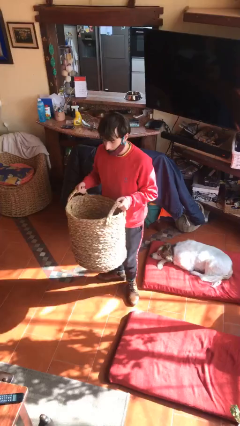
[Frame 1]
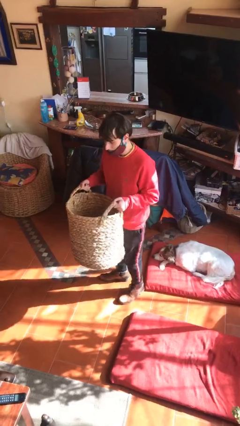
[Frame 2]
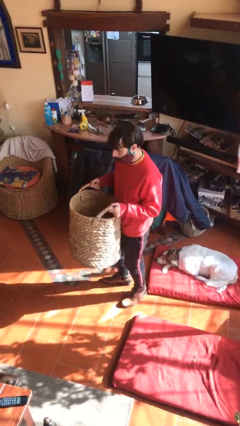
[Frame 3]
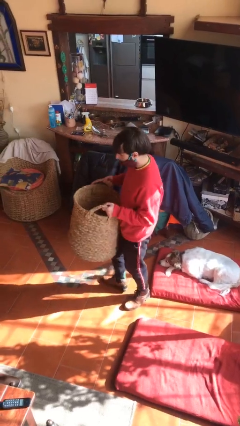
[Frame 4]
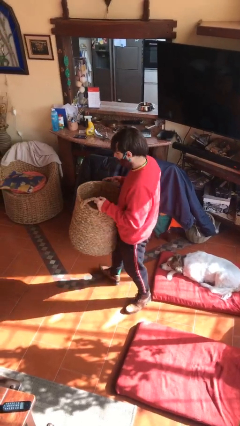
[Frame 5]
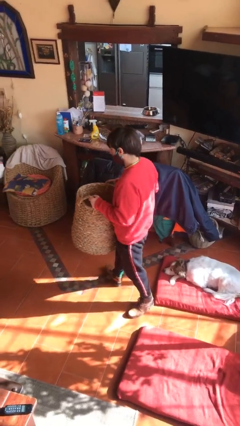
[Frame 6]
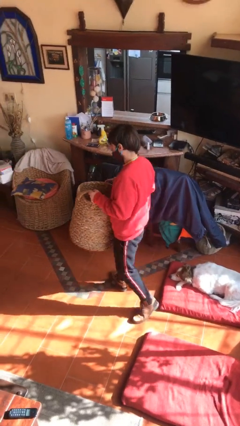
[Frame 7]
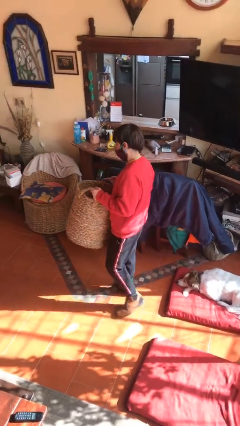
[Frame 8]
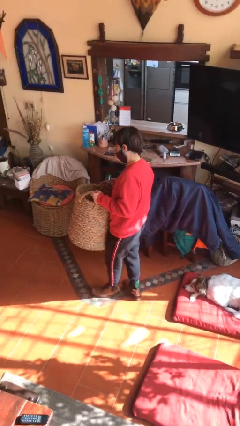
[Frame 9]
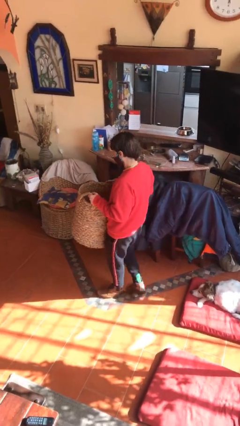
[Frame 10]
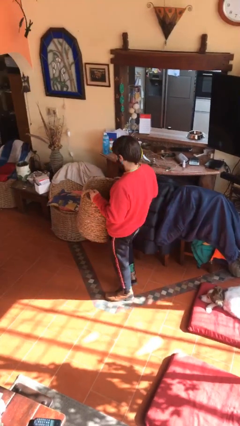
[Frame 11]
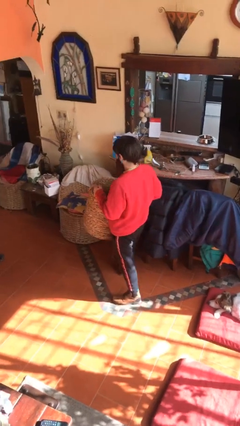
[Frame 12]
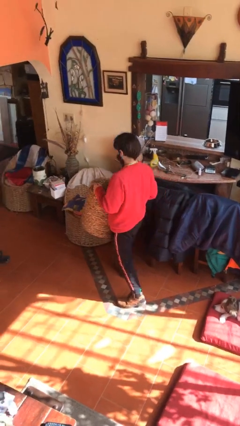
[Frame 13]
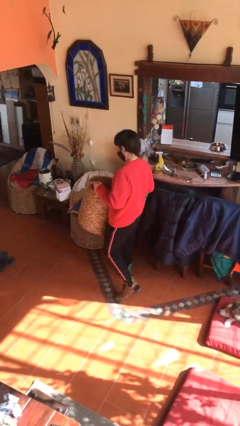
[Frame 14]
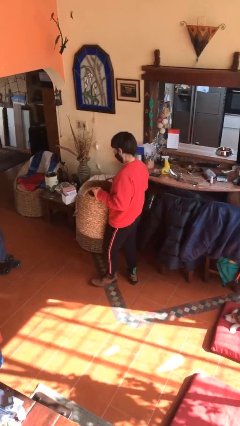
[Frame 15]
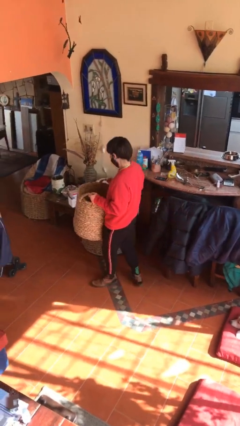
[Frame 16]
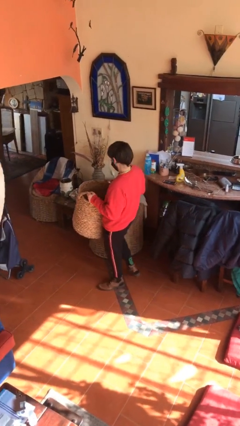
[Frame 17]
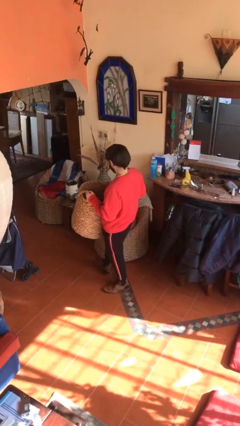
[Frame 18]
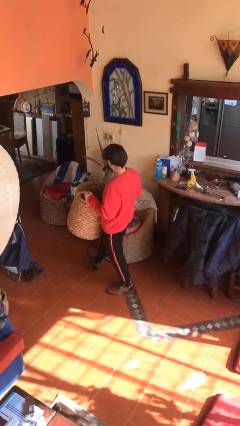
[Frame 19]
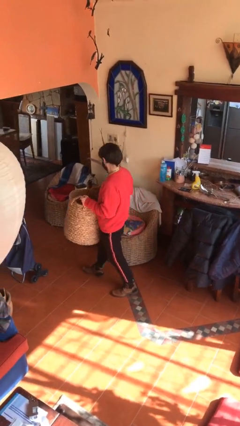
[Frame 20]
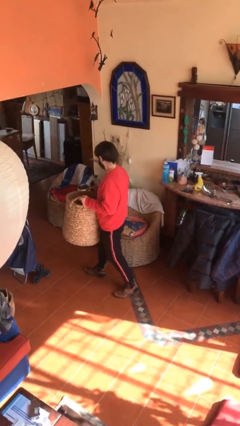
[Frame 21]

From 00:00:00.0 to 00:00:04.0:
person carries laundry basket

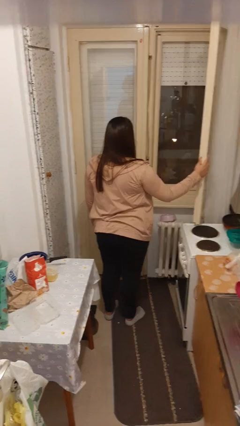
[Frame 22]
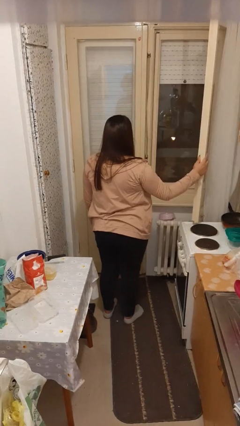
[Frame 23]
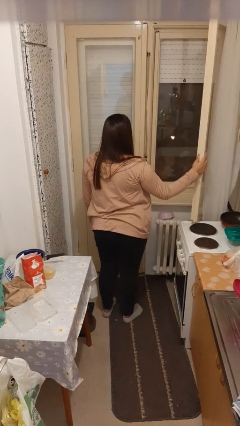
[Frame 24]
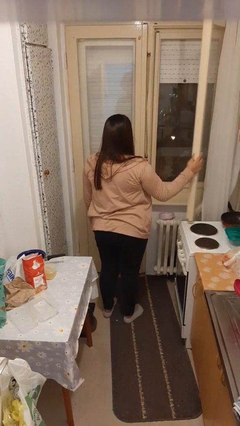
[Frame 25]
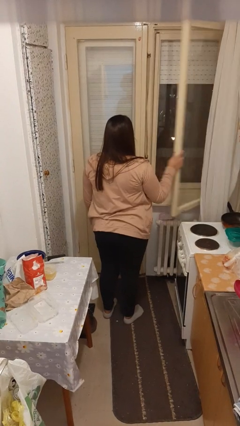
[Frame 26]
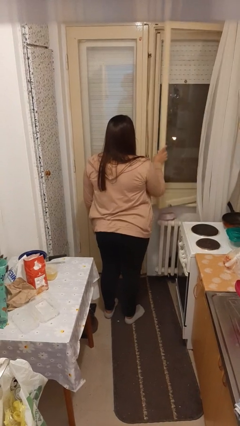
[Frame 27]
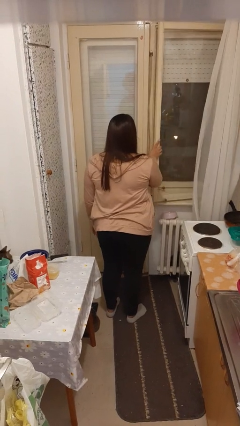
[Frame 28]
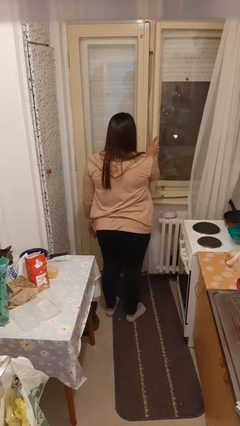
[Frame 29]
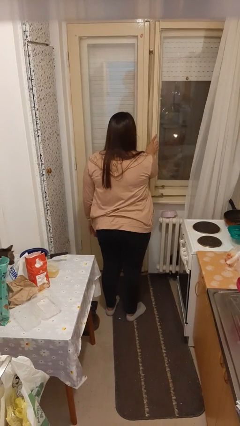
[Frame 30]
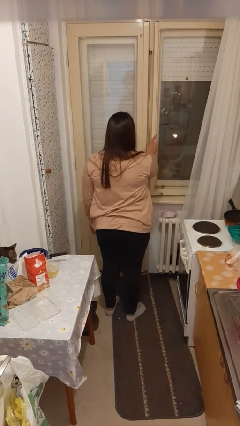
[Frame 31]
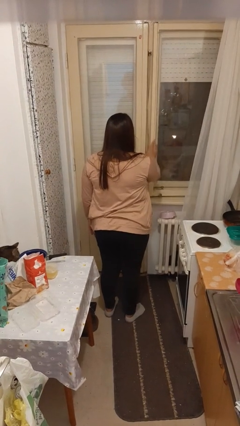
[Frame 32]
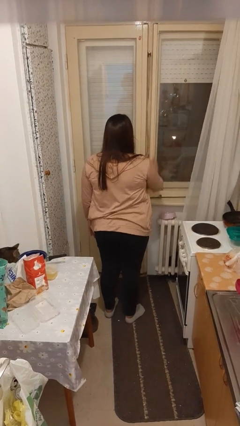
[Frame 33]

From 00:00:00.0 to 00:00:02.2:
person closes home window

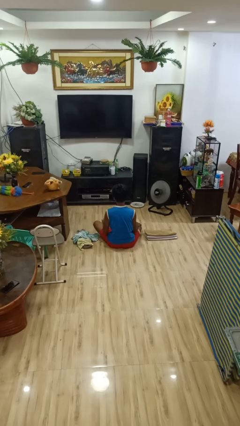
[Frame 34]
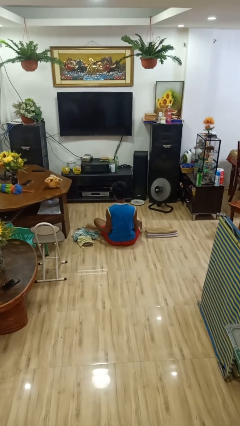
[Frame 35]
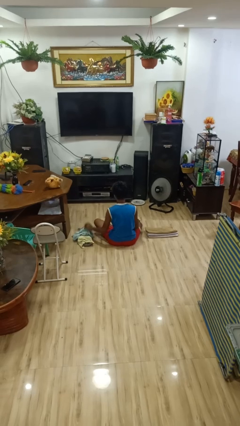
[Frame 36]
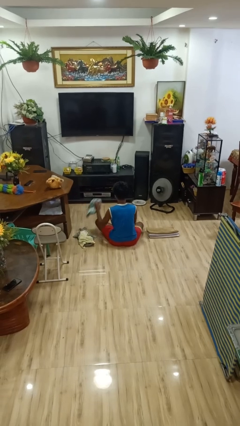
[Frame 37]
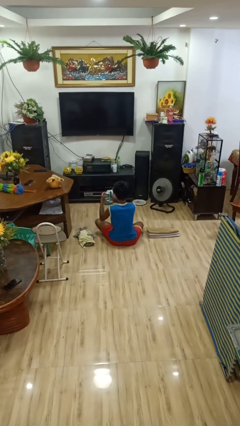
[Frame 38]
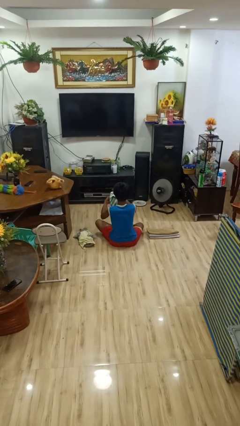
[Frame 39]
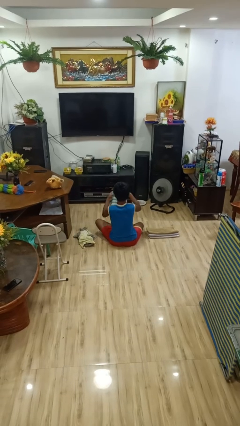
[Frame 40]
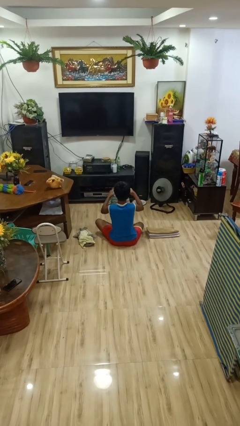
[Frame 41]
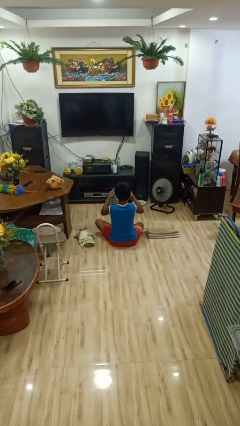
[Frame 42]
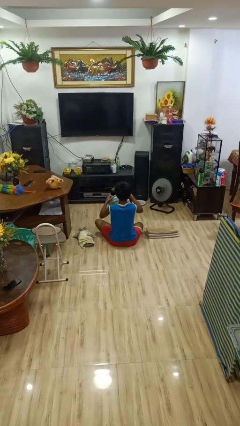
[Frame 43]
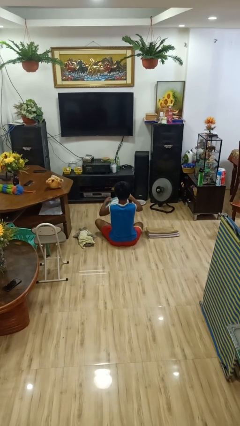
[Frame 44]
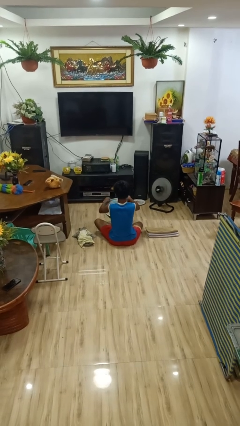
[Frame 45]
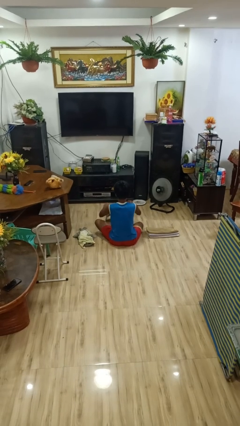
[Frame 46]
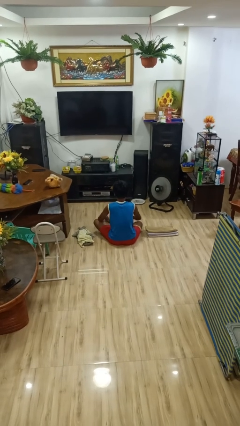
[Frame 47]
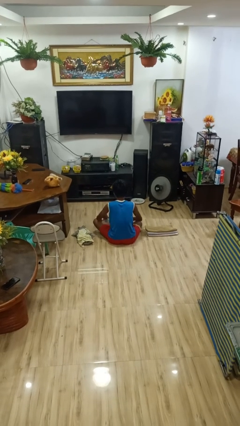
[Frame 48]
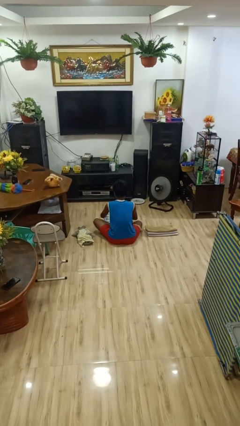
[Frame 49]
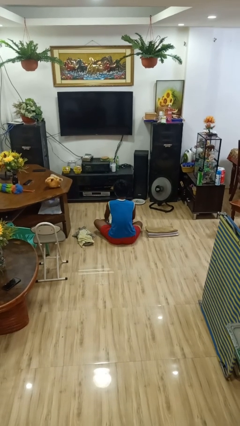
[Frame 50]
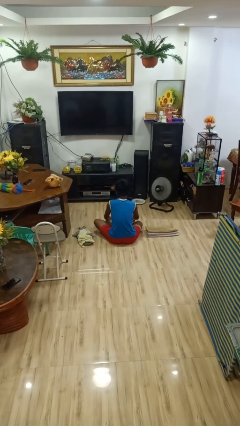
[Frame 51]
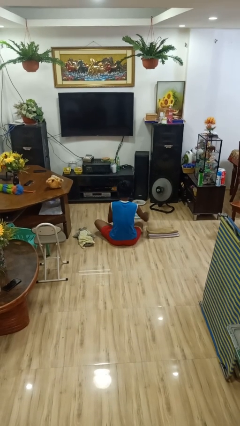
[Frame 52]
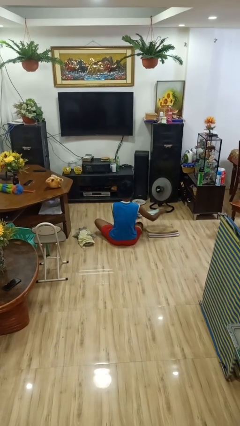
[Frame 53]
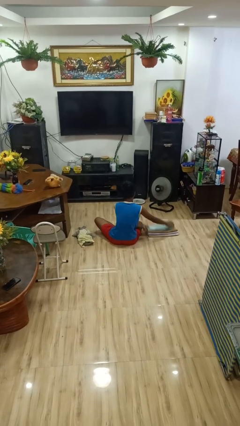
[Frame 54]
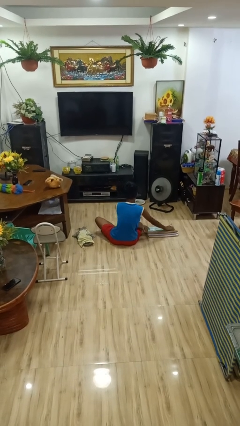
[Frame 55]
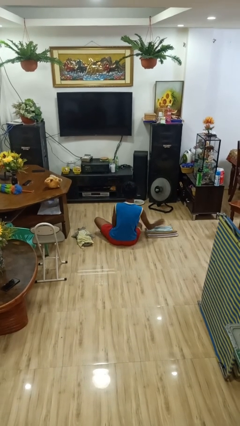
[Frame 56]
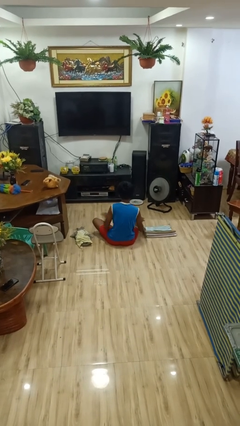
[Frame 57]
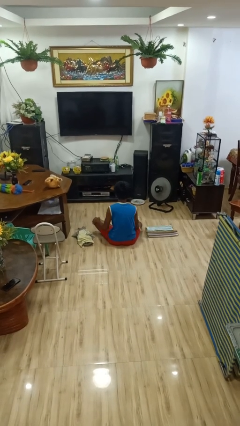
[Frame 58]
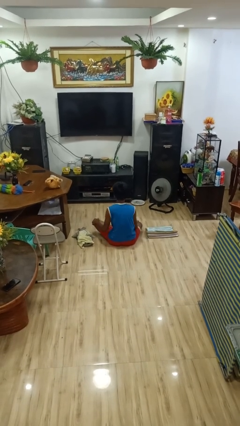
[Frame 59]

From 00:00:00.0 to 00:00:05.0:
person folds towel

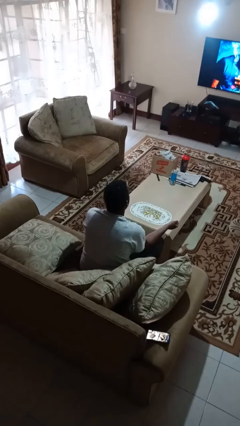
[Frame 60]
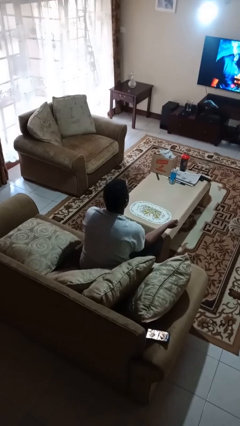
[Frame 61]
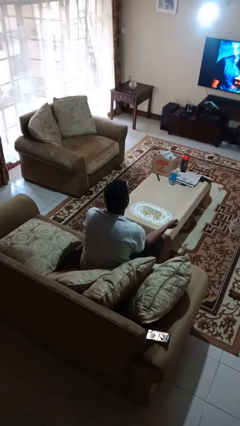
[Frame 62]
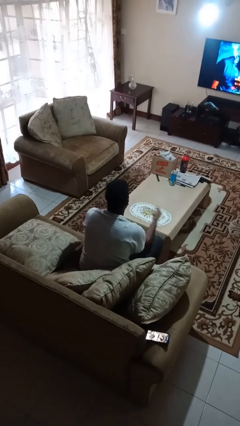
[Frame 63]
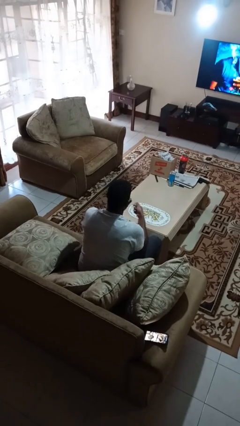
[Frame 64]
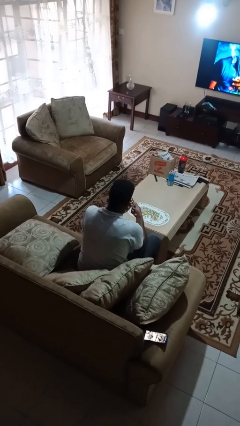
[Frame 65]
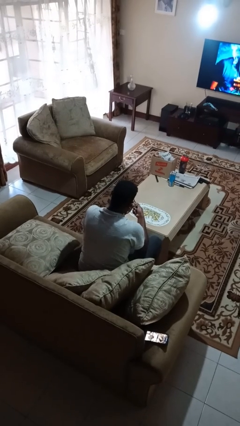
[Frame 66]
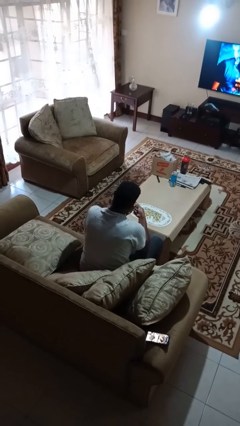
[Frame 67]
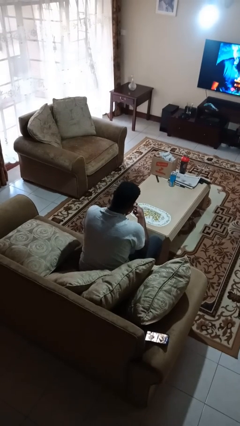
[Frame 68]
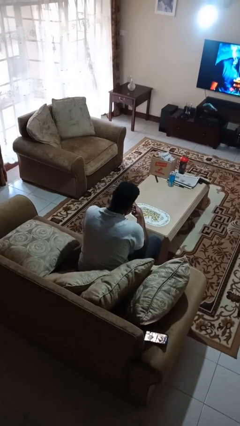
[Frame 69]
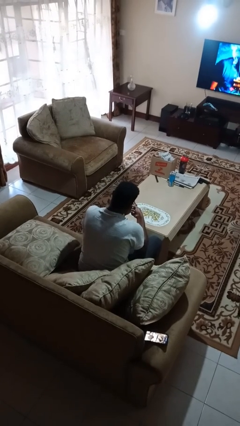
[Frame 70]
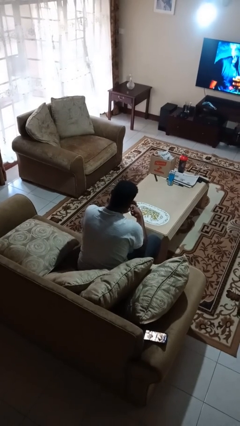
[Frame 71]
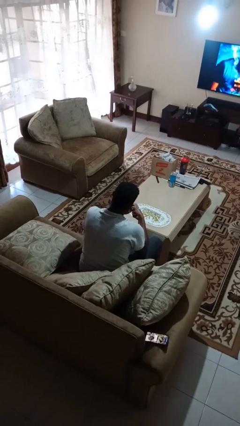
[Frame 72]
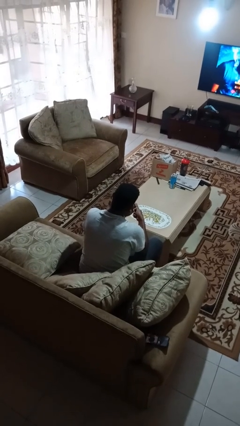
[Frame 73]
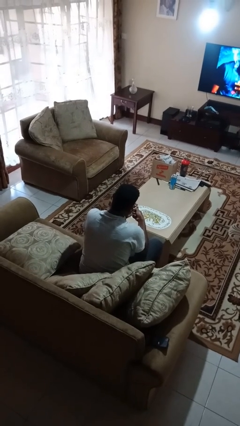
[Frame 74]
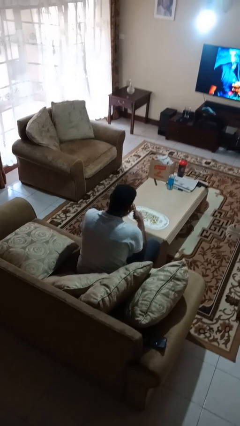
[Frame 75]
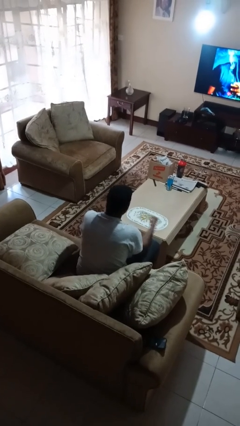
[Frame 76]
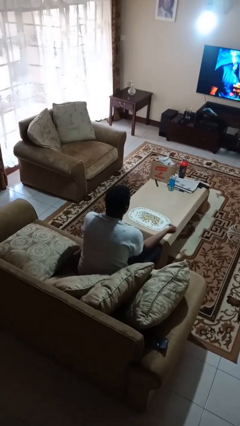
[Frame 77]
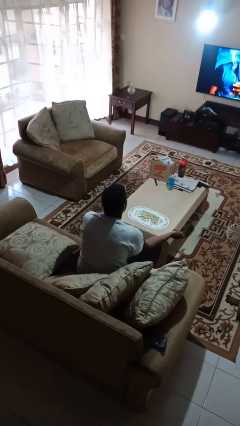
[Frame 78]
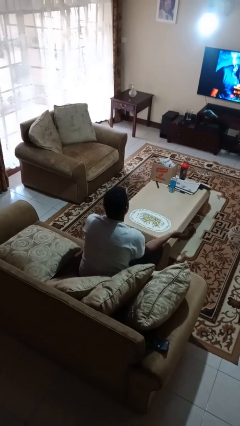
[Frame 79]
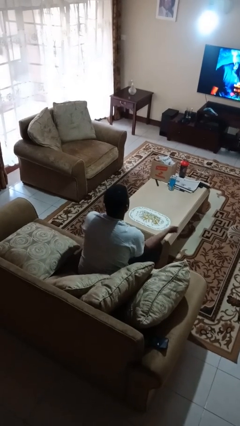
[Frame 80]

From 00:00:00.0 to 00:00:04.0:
person clips fingernails

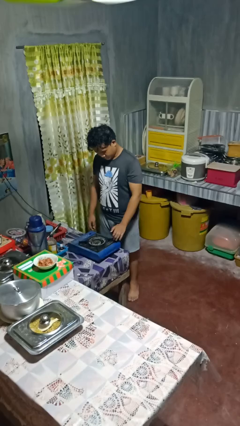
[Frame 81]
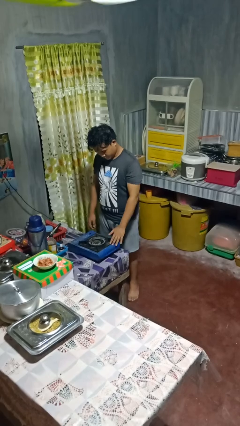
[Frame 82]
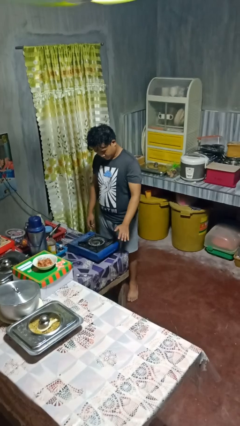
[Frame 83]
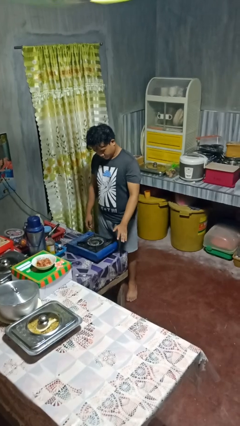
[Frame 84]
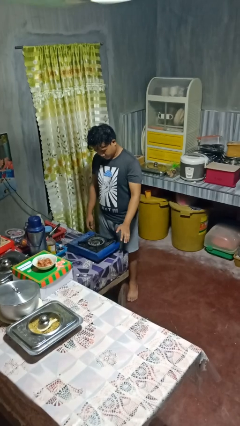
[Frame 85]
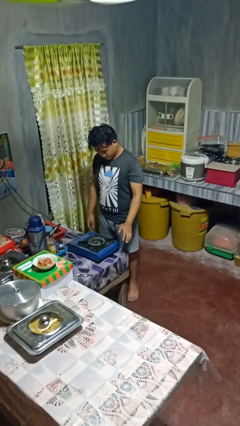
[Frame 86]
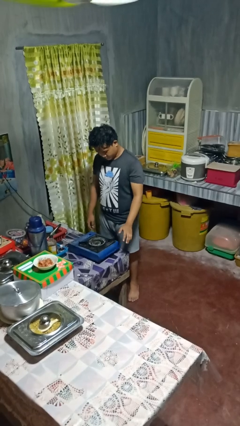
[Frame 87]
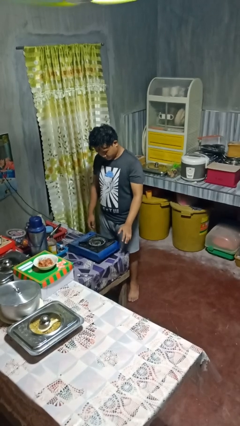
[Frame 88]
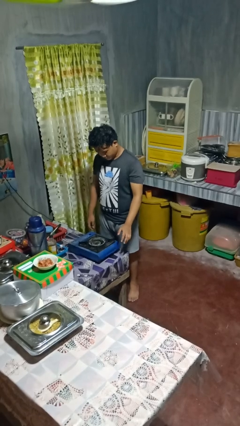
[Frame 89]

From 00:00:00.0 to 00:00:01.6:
person burns hand

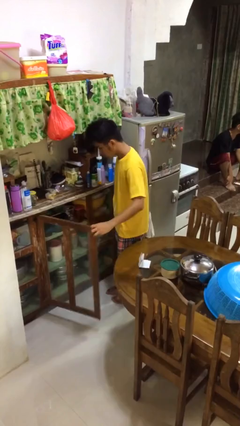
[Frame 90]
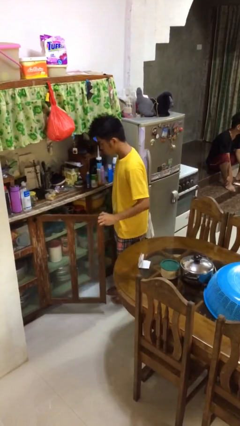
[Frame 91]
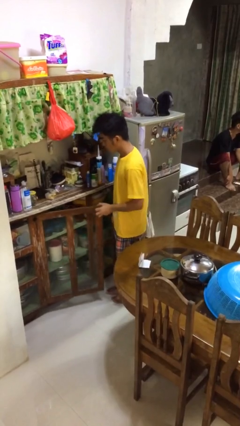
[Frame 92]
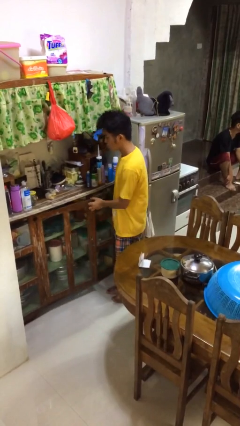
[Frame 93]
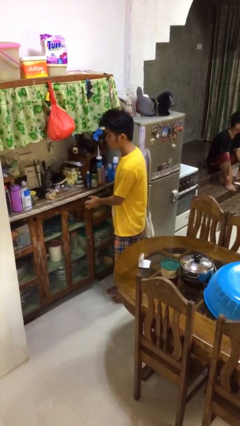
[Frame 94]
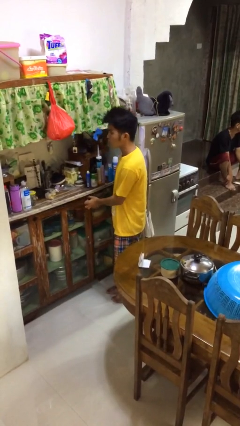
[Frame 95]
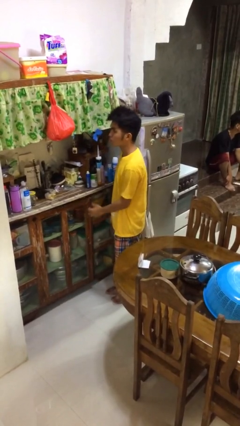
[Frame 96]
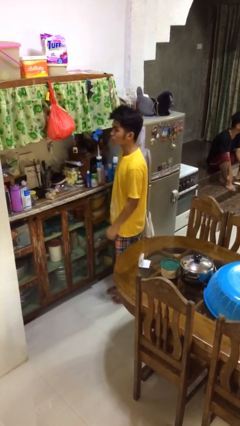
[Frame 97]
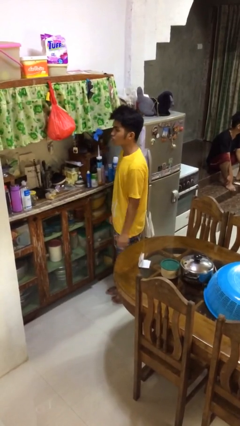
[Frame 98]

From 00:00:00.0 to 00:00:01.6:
person closes cabinet